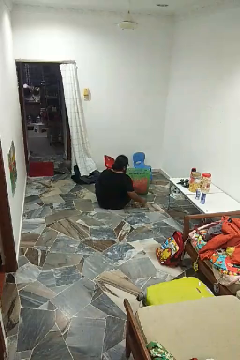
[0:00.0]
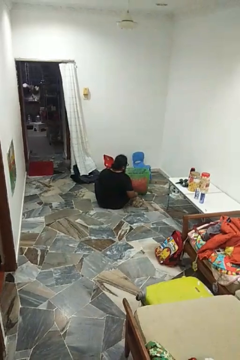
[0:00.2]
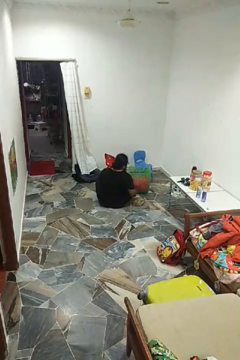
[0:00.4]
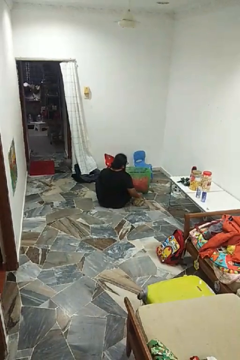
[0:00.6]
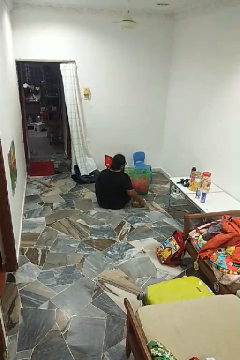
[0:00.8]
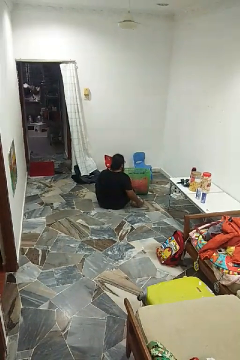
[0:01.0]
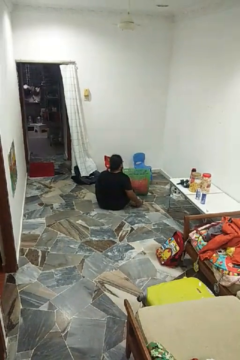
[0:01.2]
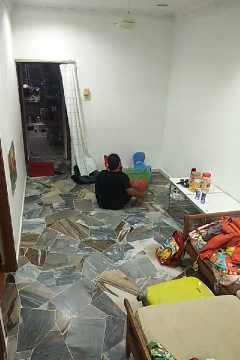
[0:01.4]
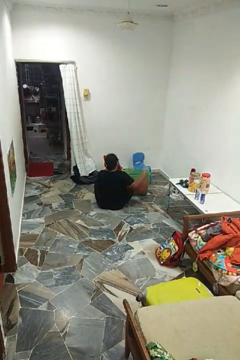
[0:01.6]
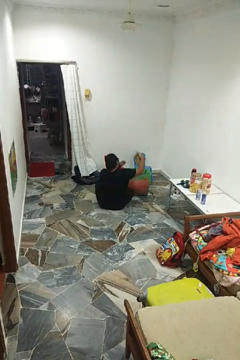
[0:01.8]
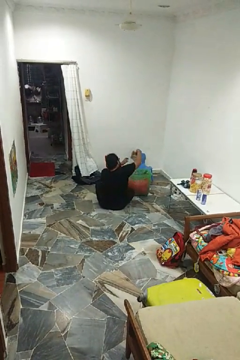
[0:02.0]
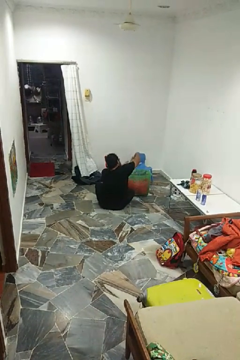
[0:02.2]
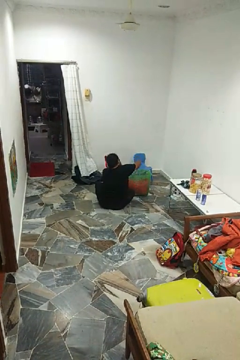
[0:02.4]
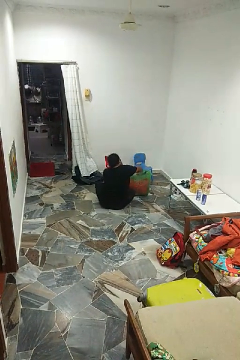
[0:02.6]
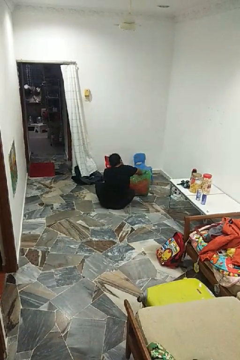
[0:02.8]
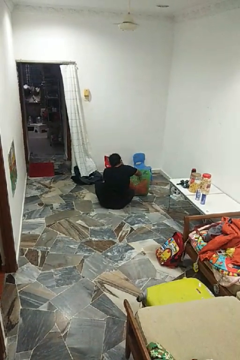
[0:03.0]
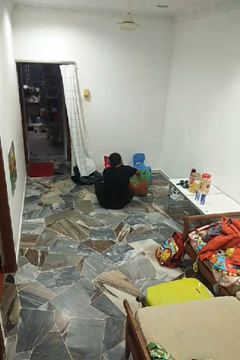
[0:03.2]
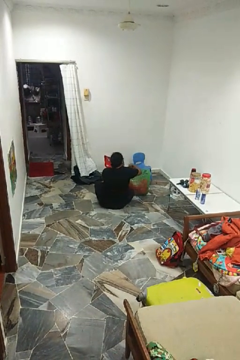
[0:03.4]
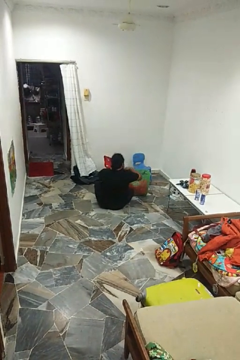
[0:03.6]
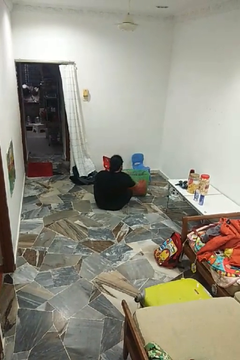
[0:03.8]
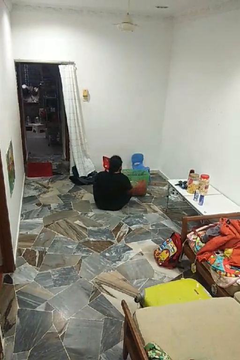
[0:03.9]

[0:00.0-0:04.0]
person puts object into basket

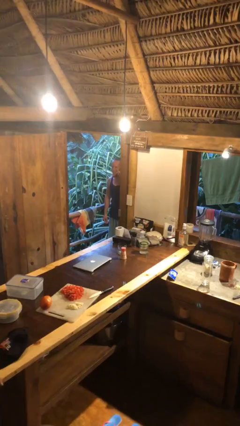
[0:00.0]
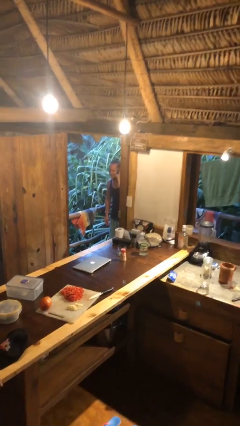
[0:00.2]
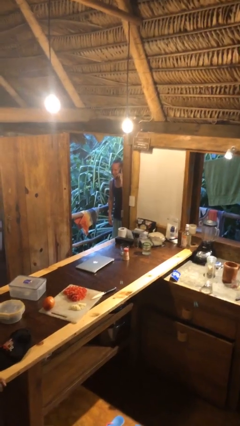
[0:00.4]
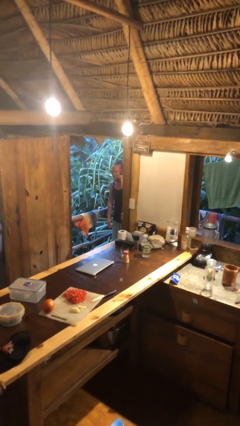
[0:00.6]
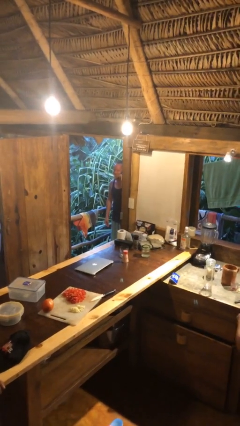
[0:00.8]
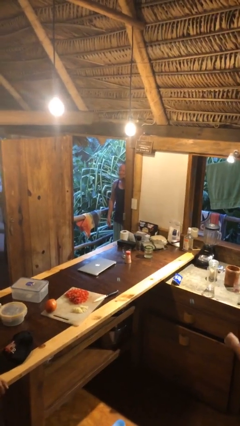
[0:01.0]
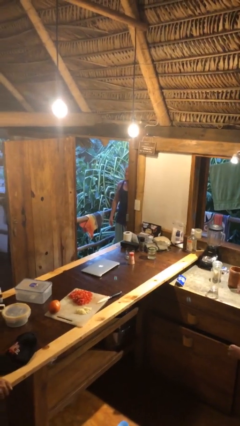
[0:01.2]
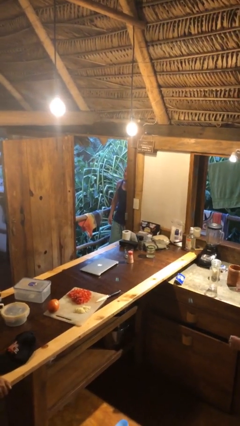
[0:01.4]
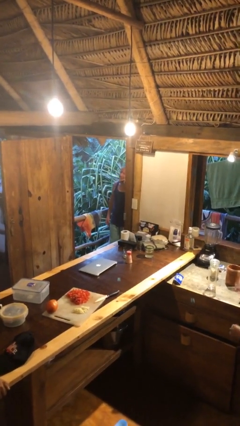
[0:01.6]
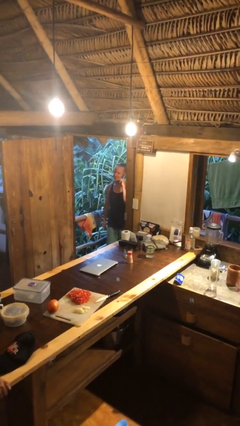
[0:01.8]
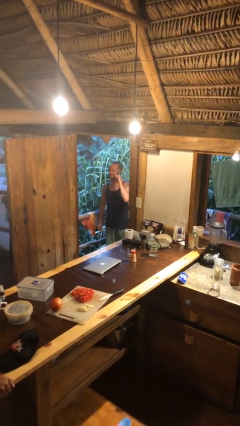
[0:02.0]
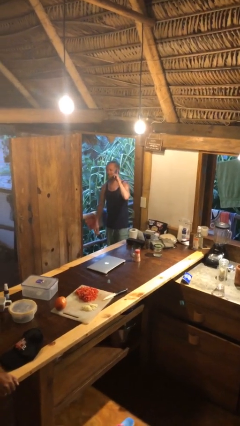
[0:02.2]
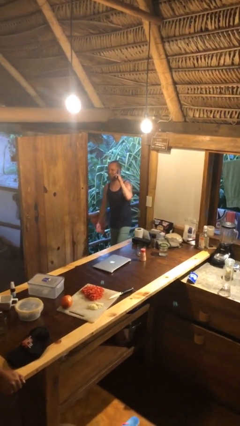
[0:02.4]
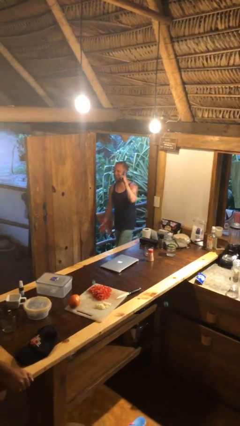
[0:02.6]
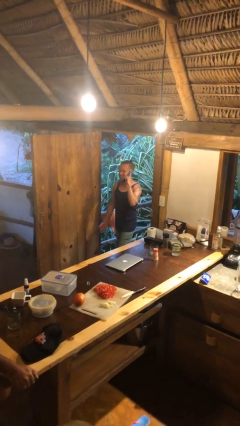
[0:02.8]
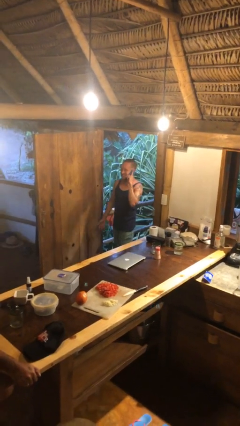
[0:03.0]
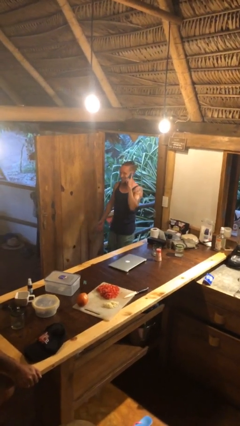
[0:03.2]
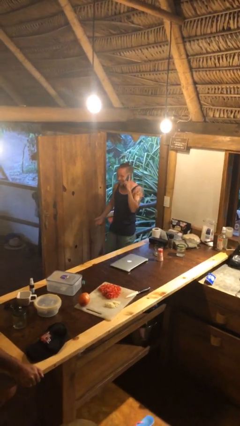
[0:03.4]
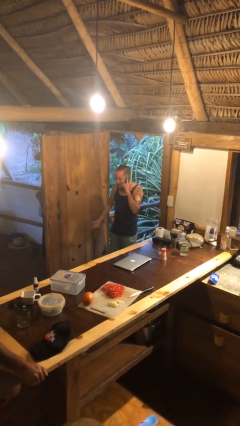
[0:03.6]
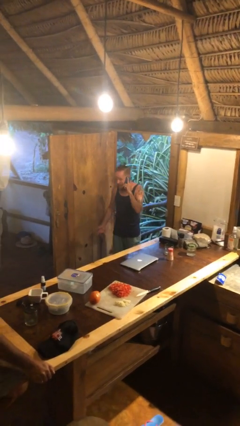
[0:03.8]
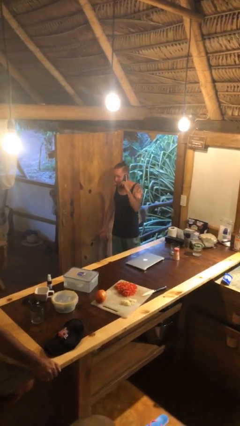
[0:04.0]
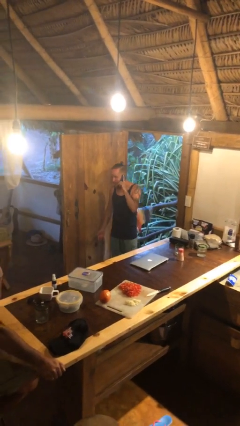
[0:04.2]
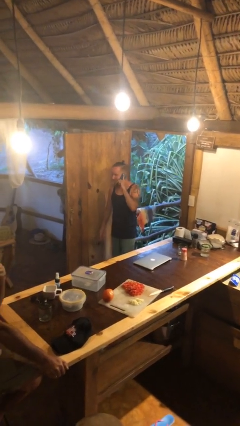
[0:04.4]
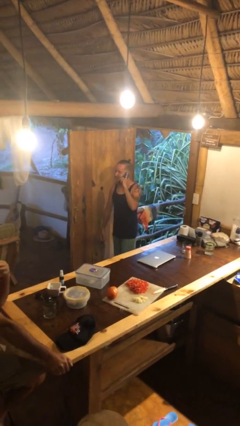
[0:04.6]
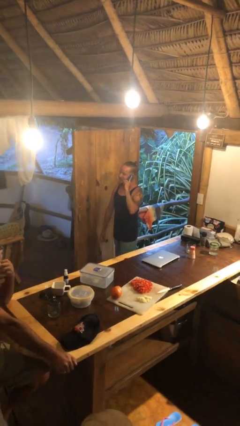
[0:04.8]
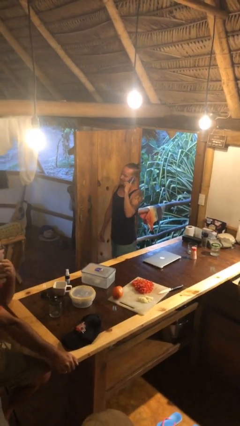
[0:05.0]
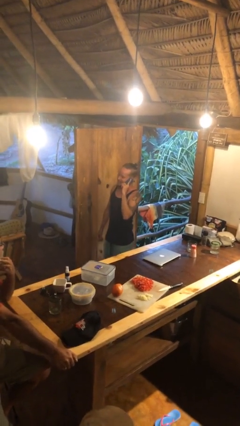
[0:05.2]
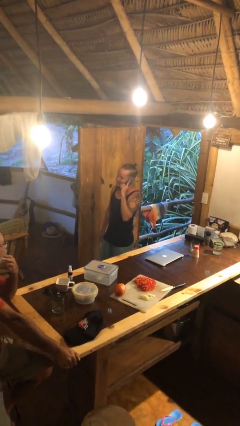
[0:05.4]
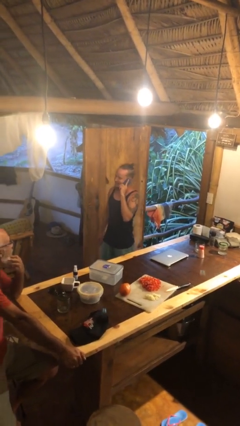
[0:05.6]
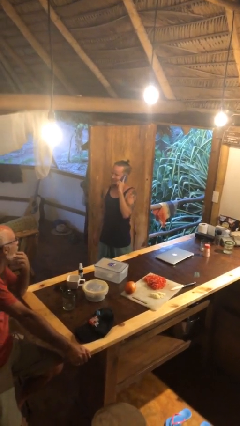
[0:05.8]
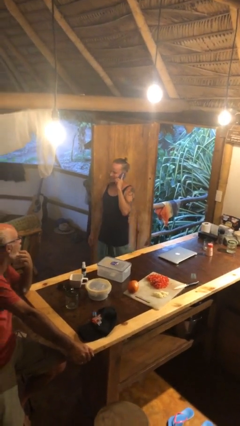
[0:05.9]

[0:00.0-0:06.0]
person enters scene through structure

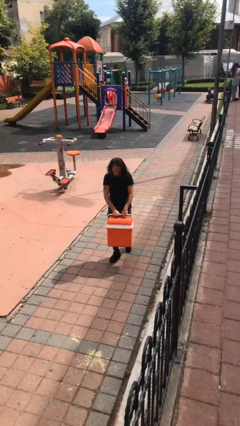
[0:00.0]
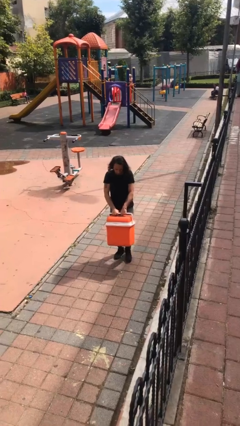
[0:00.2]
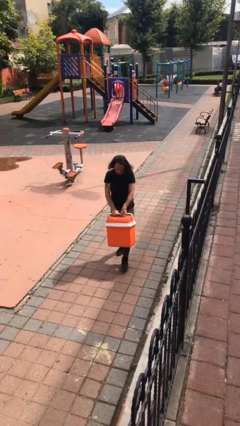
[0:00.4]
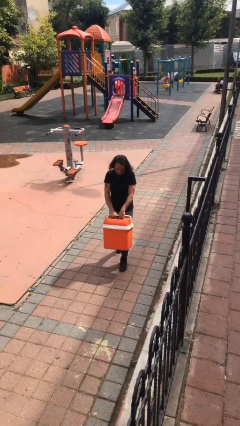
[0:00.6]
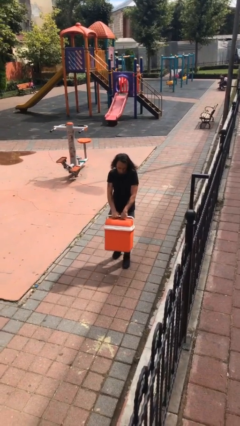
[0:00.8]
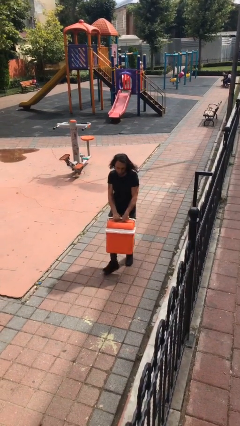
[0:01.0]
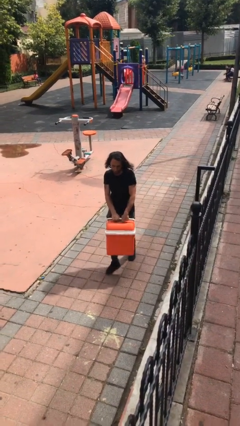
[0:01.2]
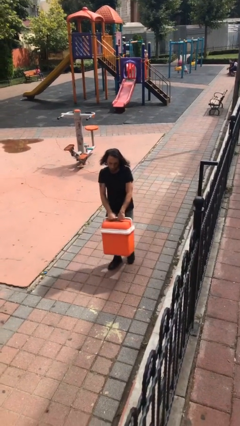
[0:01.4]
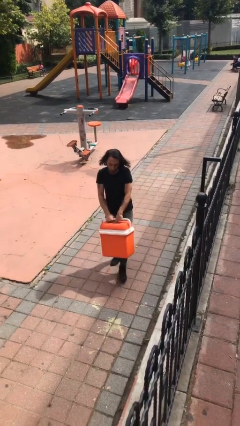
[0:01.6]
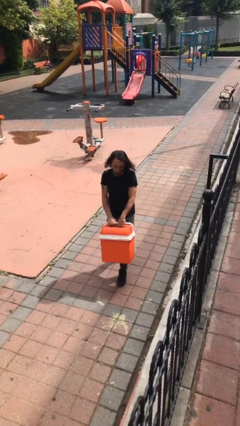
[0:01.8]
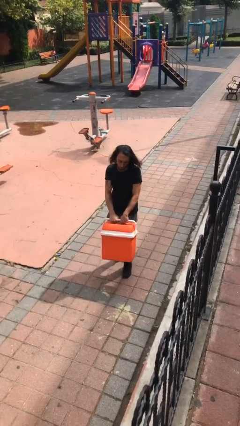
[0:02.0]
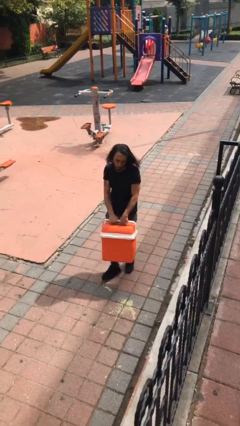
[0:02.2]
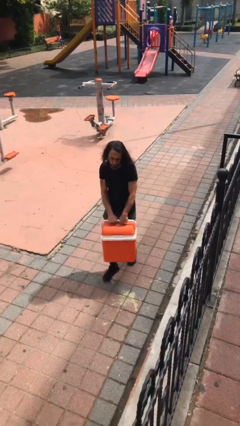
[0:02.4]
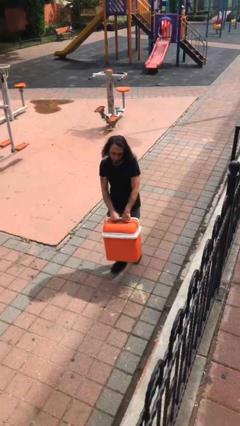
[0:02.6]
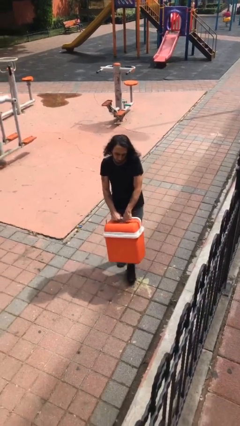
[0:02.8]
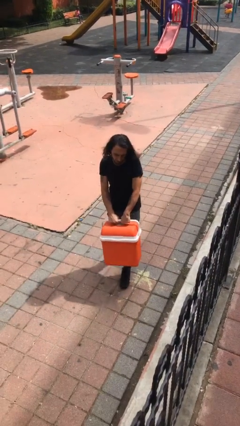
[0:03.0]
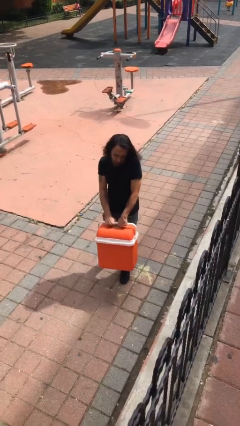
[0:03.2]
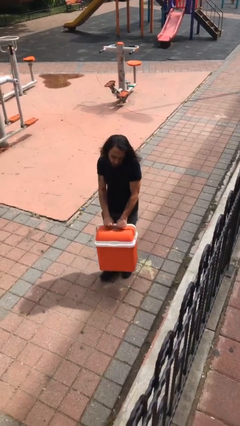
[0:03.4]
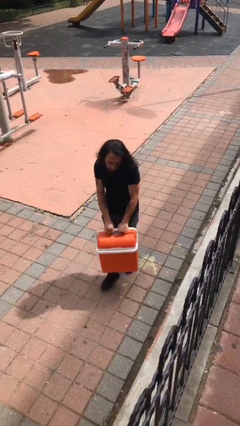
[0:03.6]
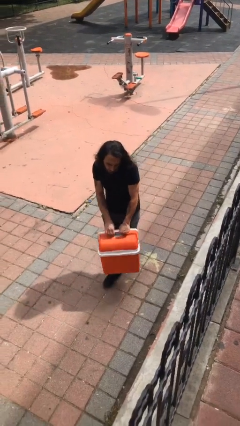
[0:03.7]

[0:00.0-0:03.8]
person carries heavy object

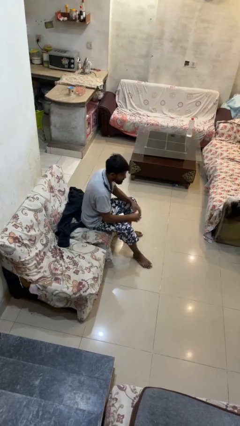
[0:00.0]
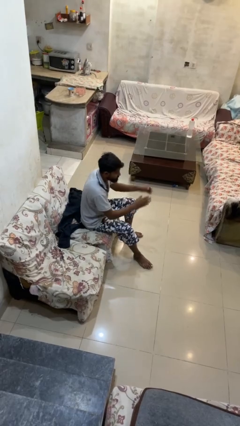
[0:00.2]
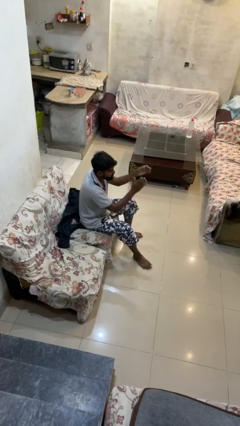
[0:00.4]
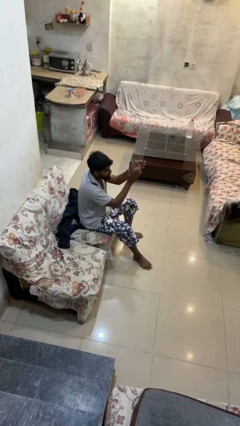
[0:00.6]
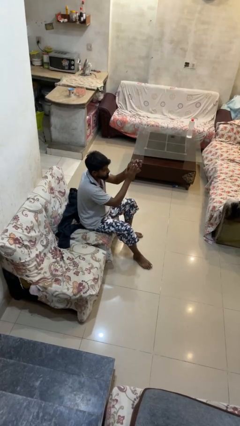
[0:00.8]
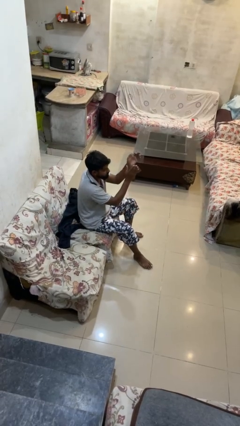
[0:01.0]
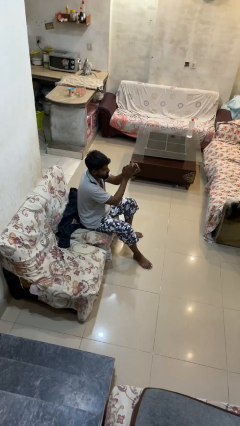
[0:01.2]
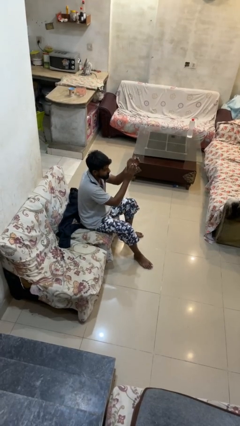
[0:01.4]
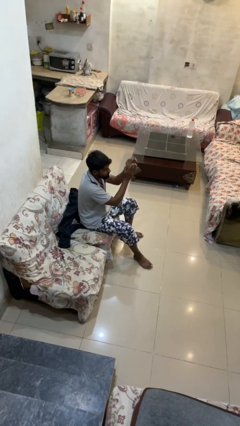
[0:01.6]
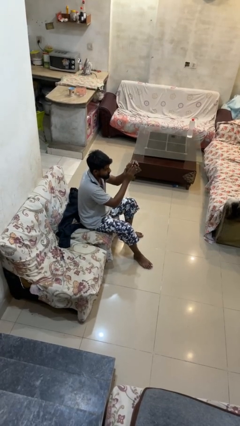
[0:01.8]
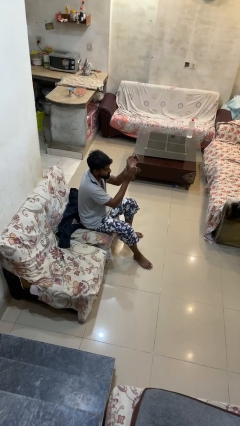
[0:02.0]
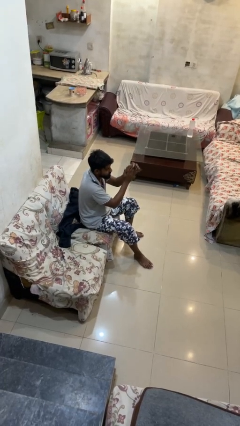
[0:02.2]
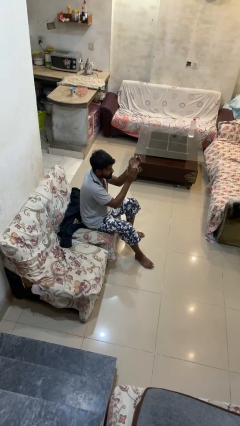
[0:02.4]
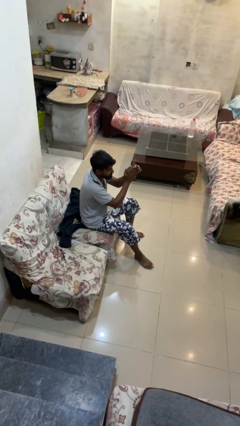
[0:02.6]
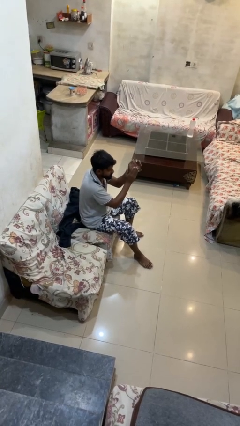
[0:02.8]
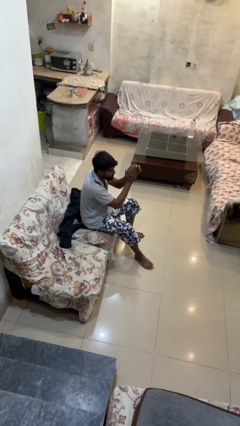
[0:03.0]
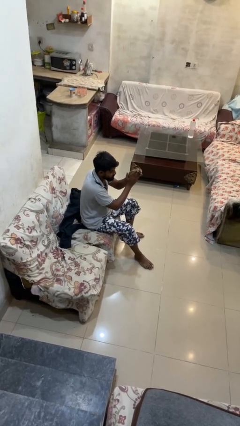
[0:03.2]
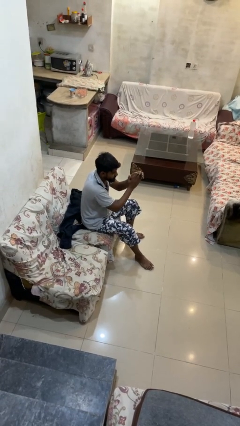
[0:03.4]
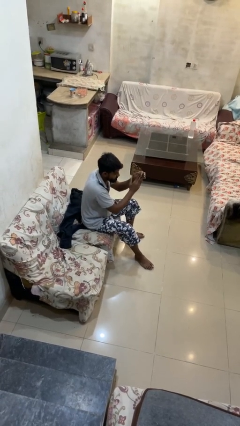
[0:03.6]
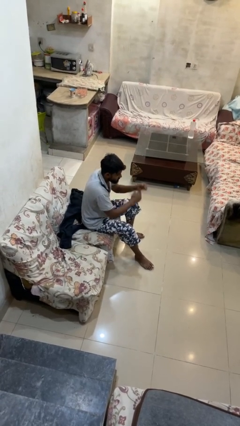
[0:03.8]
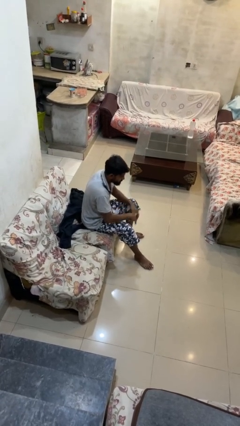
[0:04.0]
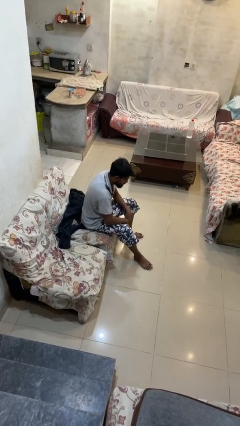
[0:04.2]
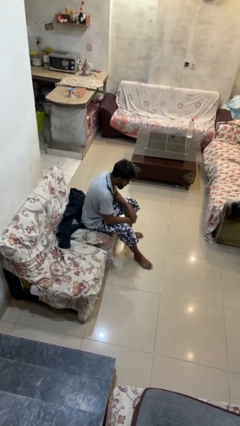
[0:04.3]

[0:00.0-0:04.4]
person claps hands
